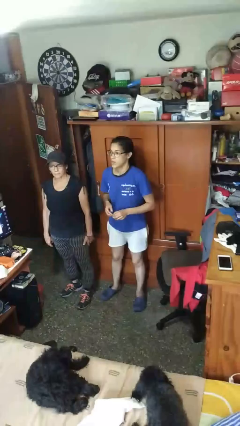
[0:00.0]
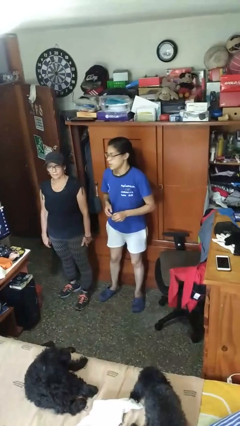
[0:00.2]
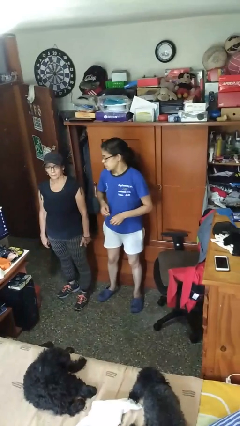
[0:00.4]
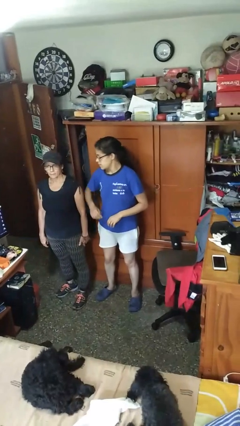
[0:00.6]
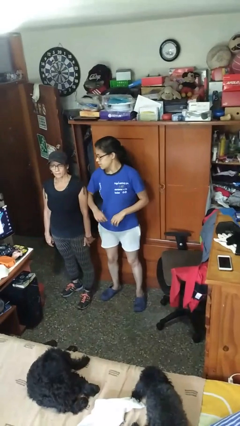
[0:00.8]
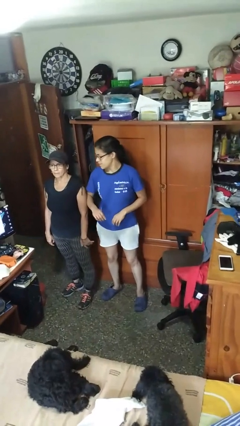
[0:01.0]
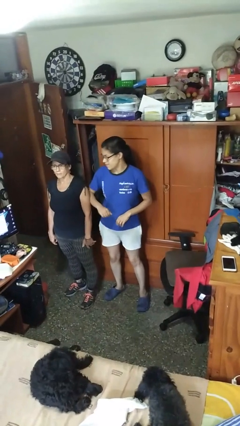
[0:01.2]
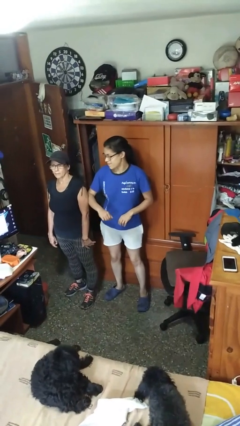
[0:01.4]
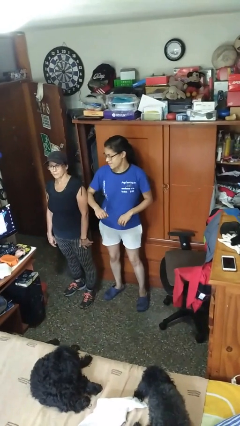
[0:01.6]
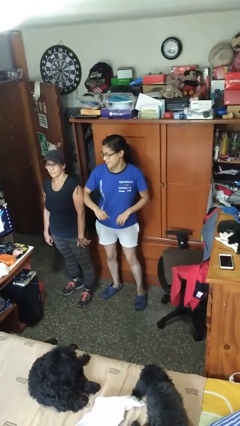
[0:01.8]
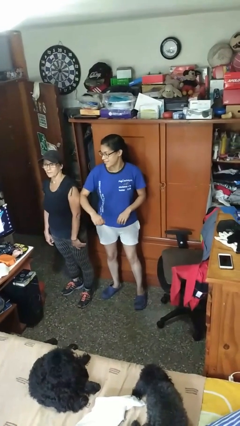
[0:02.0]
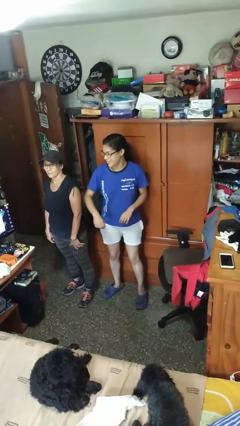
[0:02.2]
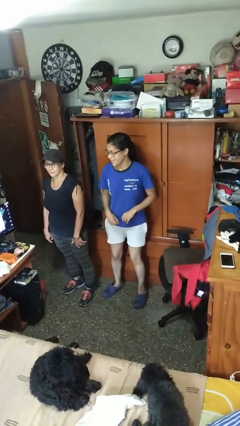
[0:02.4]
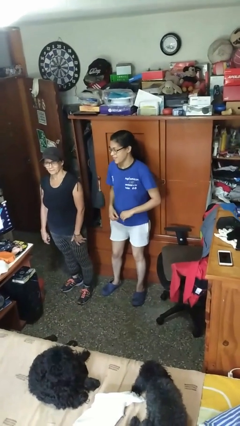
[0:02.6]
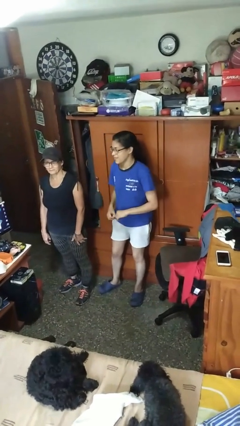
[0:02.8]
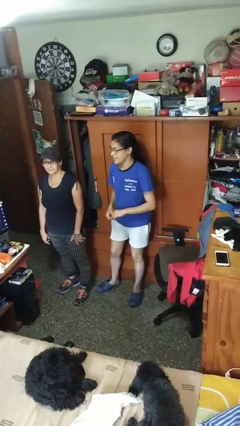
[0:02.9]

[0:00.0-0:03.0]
person nudges person with elbow

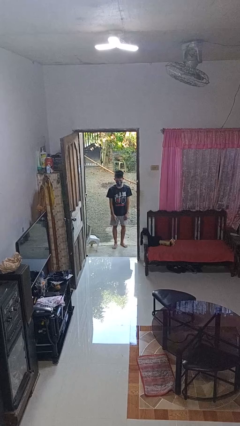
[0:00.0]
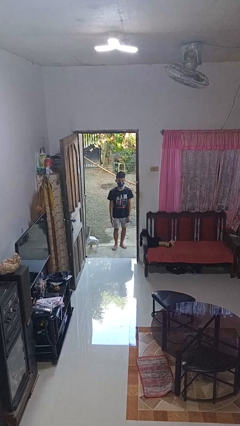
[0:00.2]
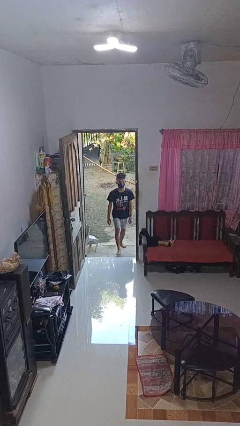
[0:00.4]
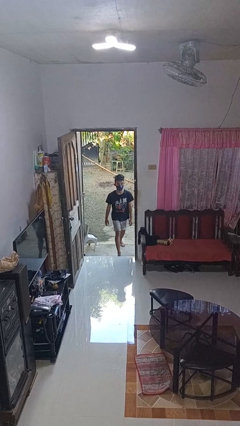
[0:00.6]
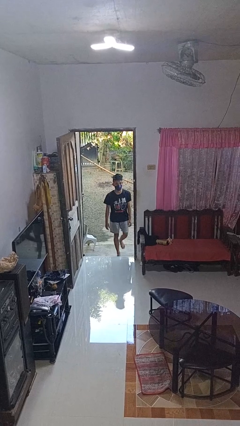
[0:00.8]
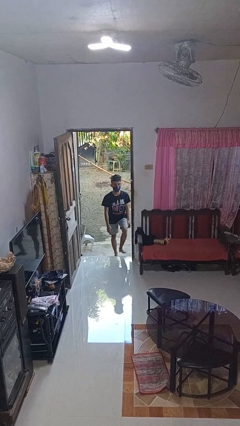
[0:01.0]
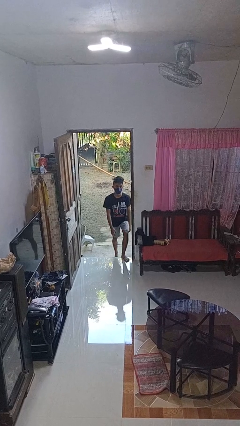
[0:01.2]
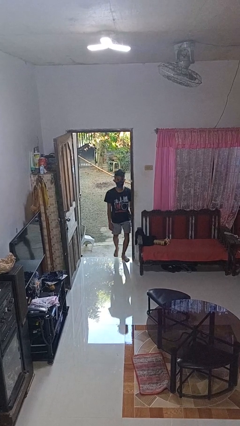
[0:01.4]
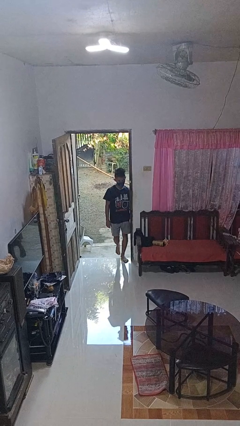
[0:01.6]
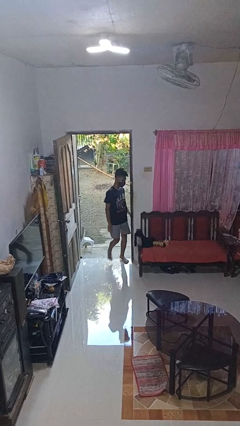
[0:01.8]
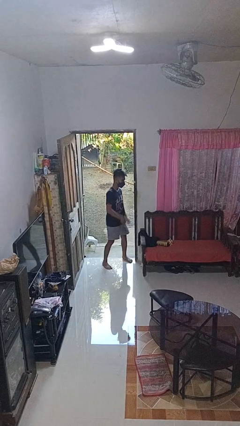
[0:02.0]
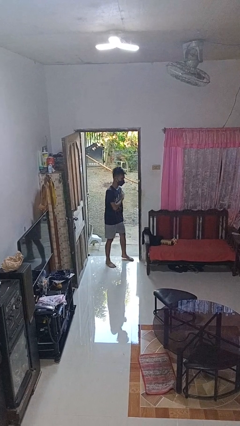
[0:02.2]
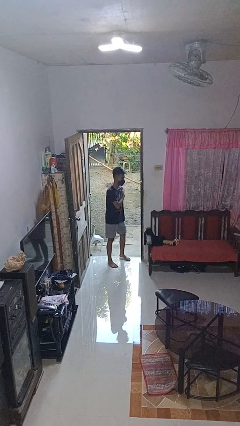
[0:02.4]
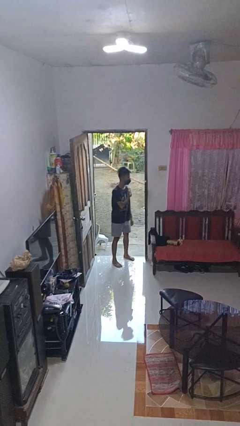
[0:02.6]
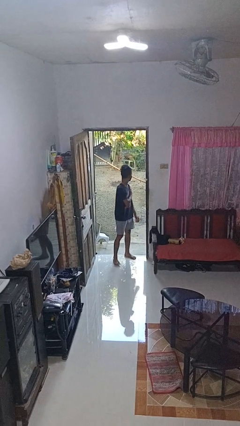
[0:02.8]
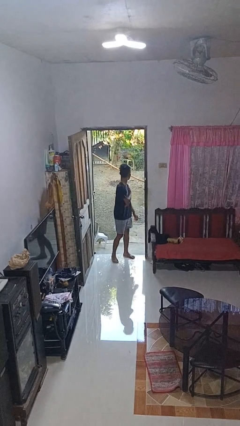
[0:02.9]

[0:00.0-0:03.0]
person bumps into wall

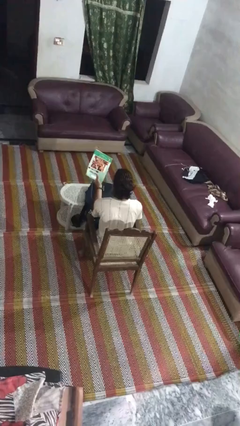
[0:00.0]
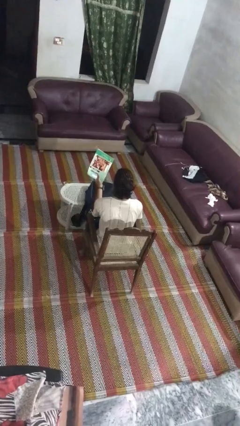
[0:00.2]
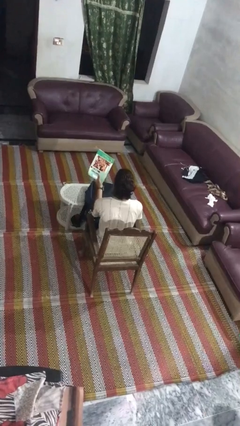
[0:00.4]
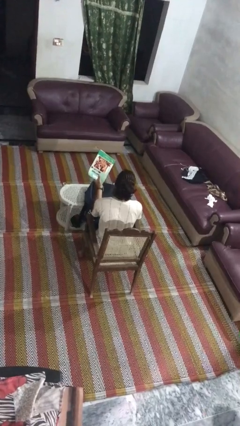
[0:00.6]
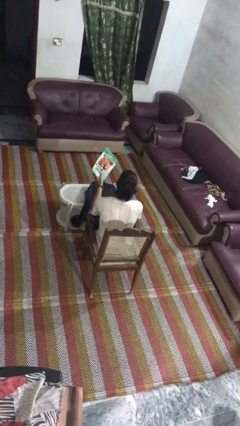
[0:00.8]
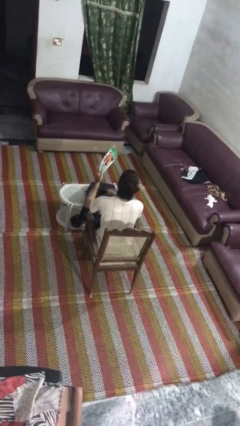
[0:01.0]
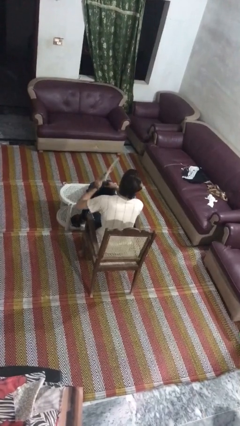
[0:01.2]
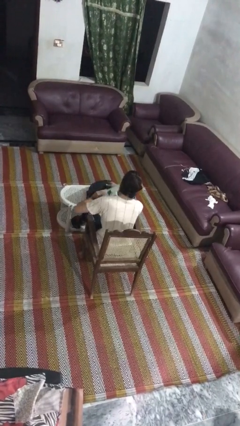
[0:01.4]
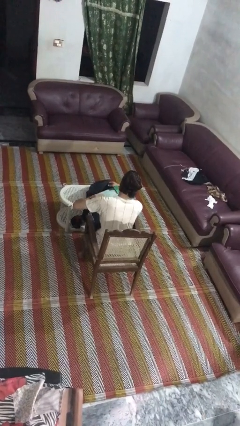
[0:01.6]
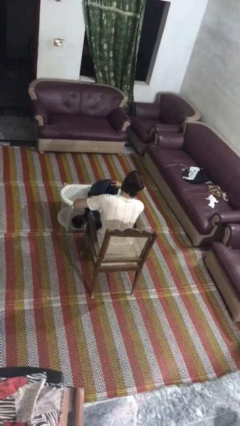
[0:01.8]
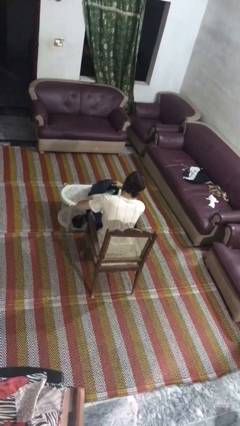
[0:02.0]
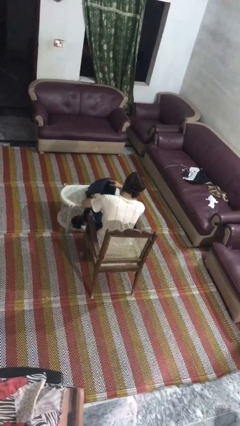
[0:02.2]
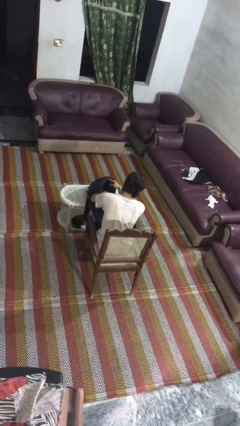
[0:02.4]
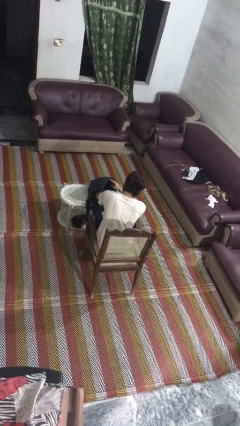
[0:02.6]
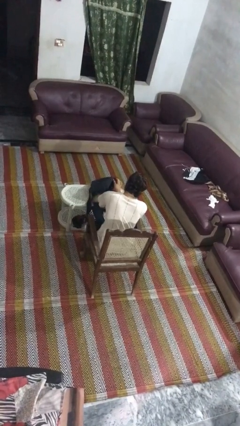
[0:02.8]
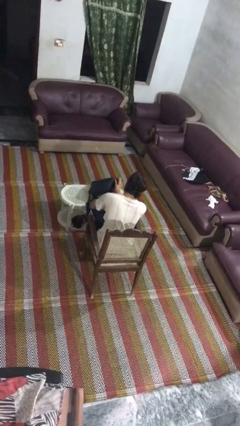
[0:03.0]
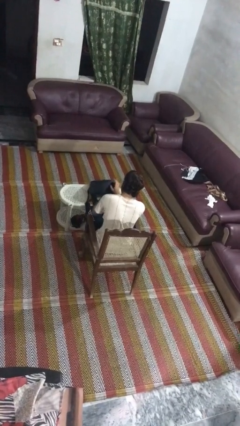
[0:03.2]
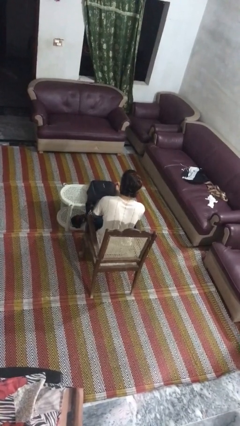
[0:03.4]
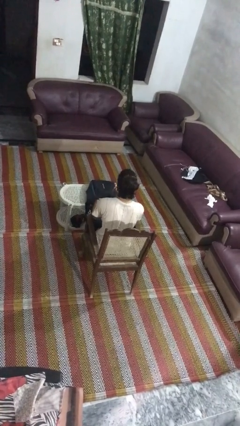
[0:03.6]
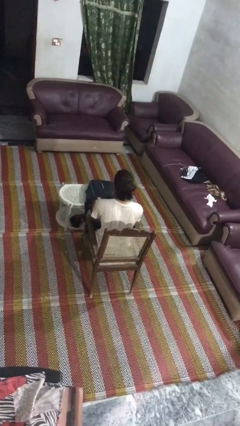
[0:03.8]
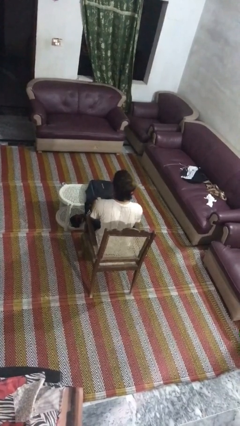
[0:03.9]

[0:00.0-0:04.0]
person puts object into backpack

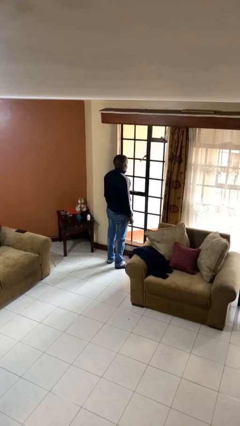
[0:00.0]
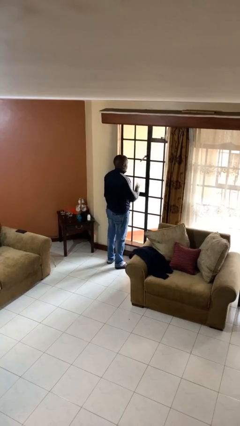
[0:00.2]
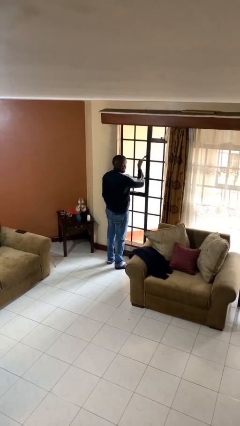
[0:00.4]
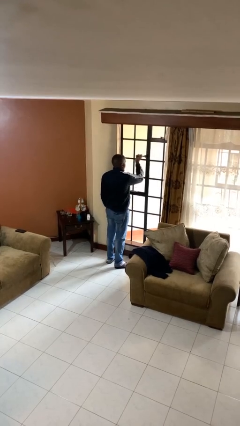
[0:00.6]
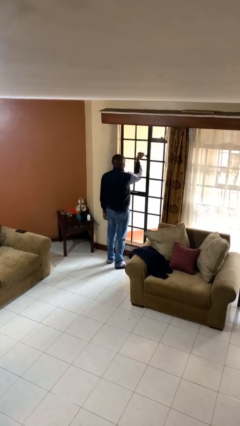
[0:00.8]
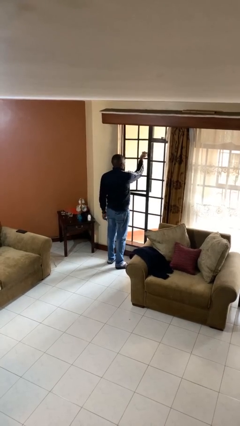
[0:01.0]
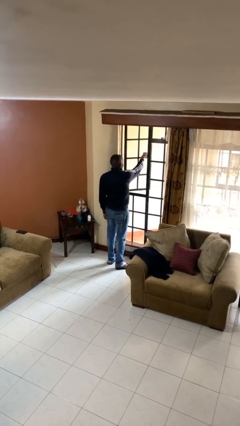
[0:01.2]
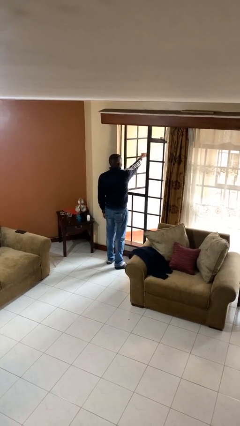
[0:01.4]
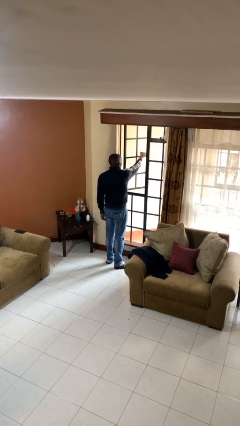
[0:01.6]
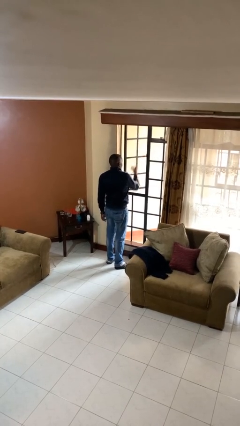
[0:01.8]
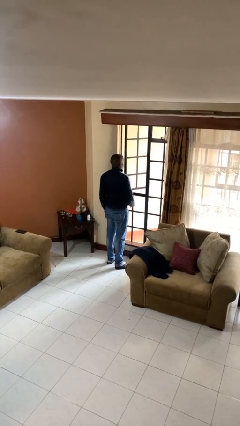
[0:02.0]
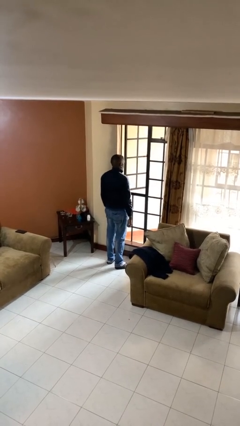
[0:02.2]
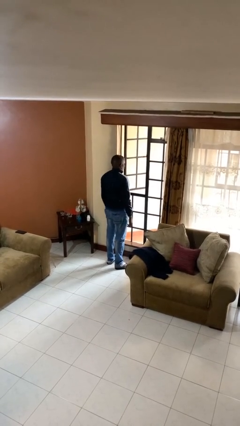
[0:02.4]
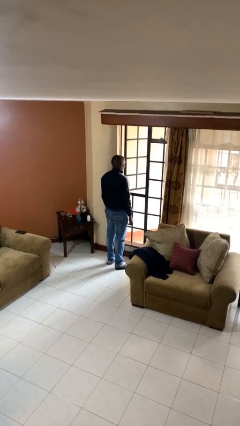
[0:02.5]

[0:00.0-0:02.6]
person opens home window

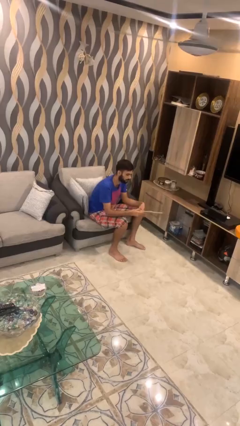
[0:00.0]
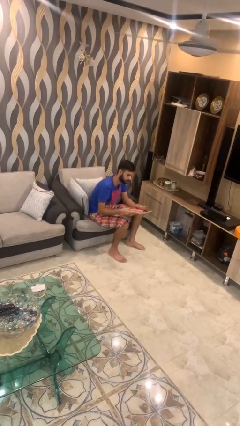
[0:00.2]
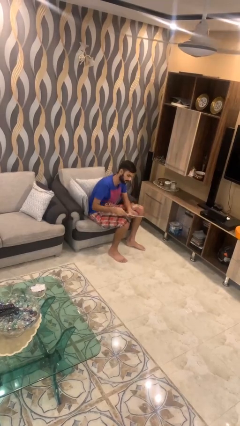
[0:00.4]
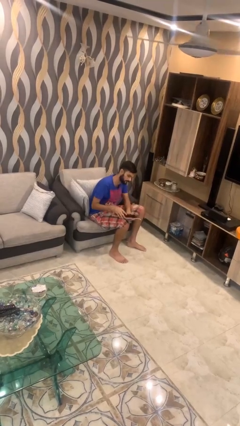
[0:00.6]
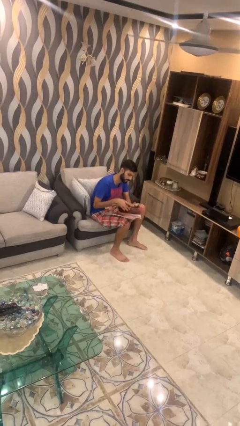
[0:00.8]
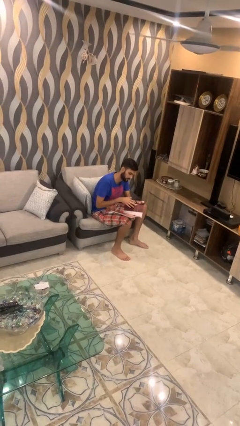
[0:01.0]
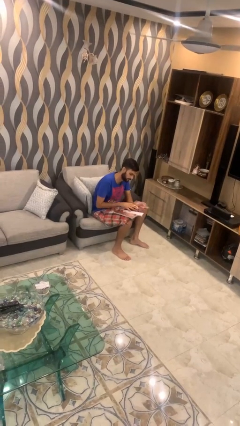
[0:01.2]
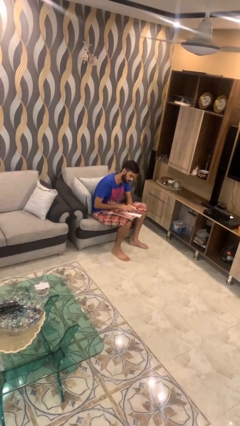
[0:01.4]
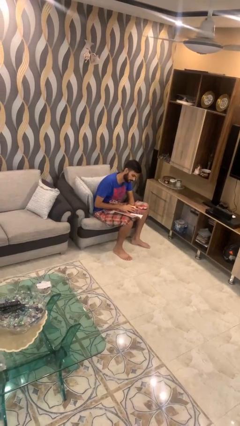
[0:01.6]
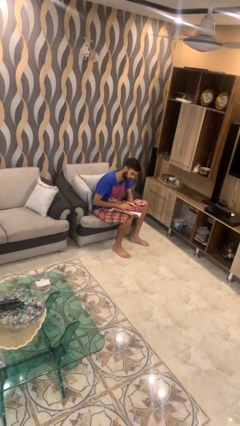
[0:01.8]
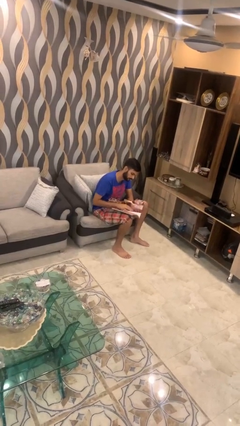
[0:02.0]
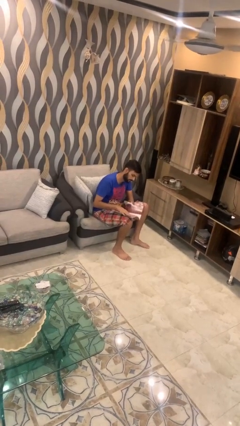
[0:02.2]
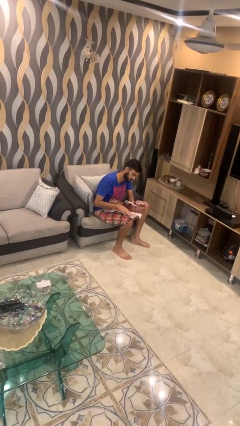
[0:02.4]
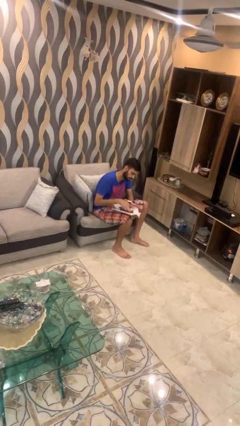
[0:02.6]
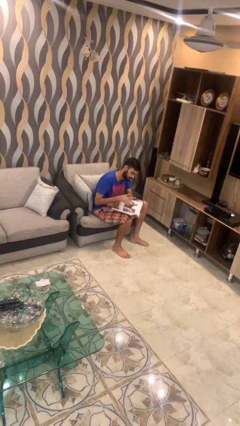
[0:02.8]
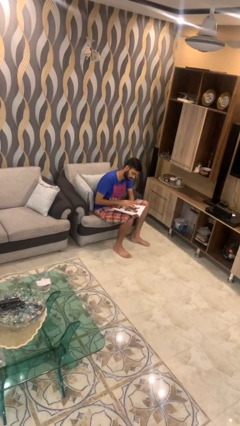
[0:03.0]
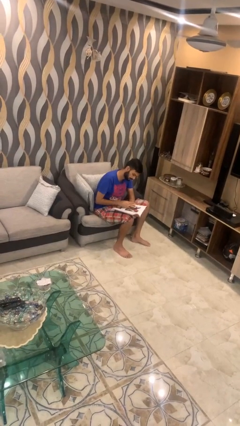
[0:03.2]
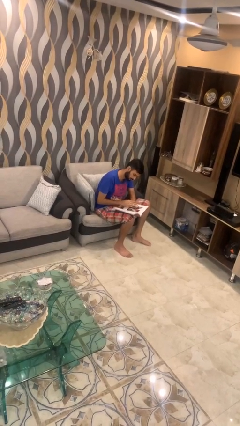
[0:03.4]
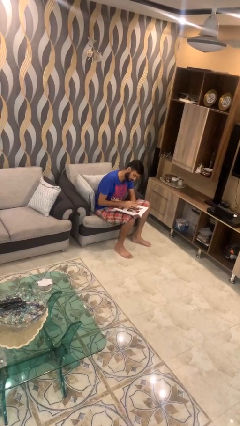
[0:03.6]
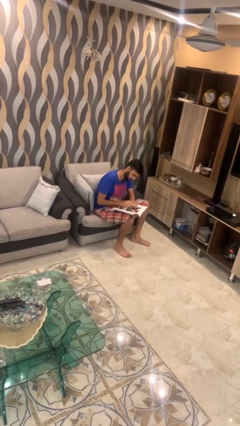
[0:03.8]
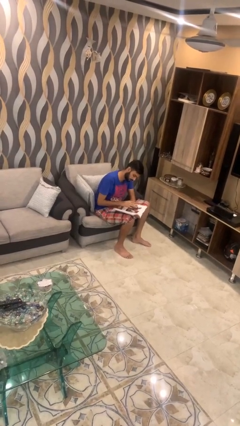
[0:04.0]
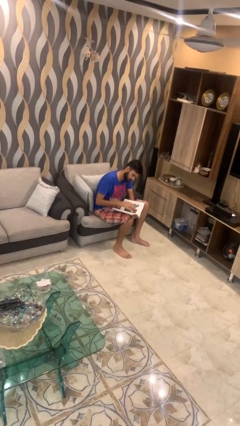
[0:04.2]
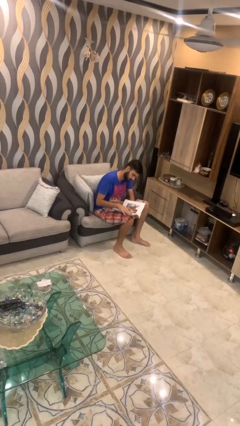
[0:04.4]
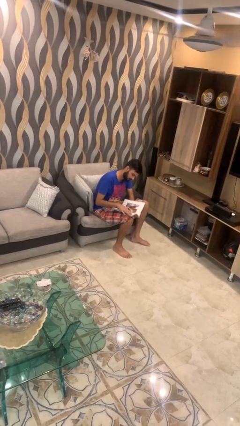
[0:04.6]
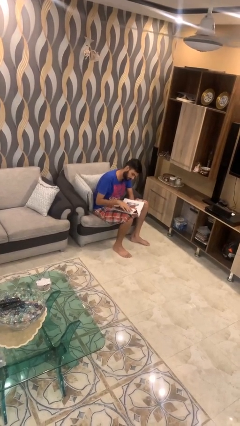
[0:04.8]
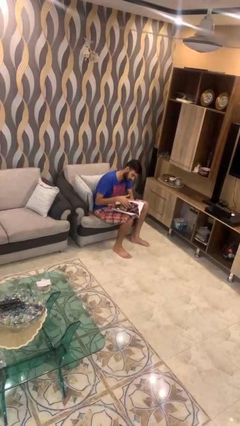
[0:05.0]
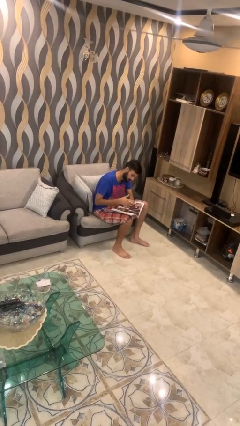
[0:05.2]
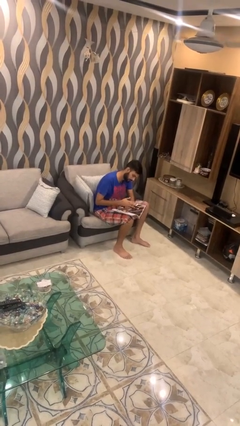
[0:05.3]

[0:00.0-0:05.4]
person reads document
